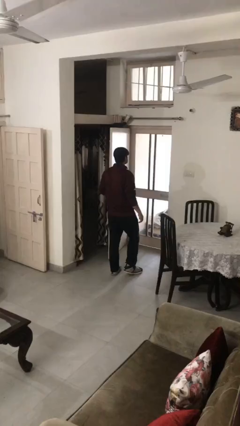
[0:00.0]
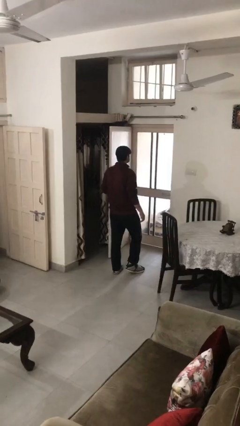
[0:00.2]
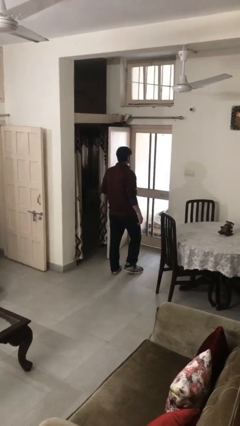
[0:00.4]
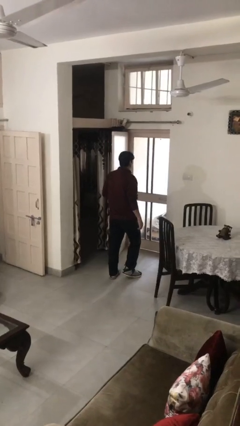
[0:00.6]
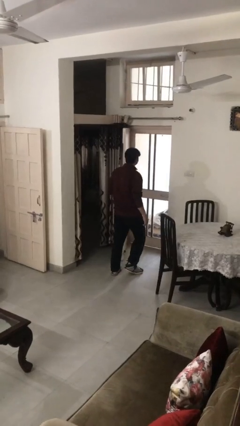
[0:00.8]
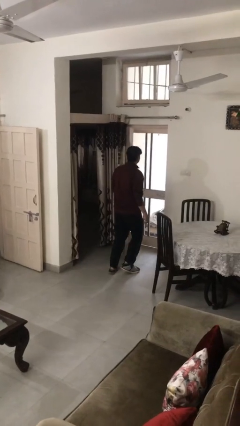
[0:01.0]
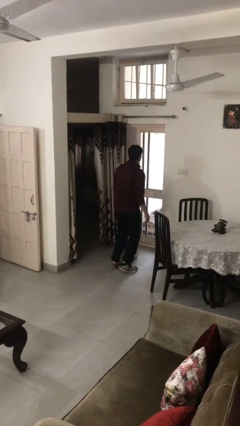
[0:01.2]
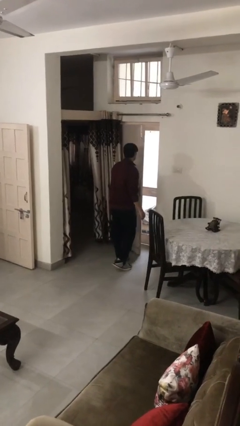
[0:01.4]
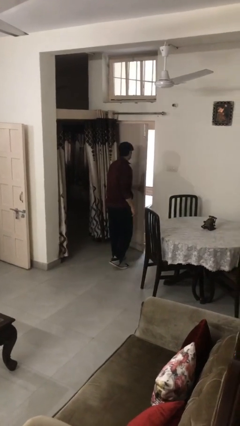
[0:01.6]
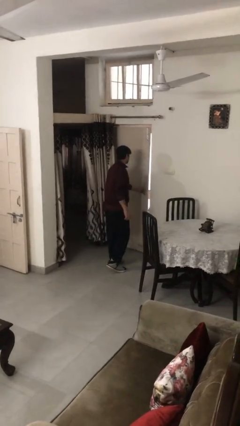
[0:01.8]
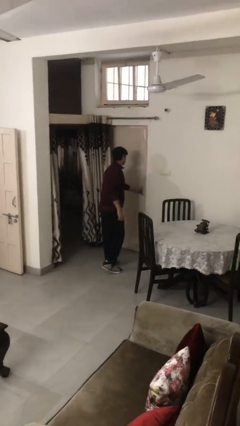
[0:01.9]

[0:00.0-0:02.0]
person closes facility door

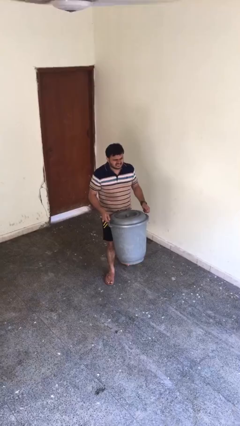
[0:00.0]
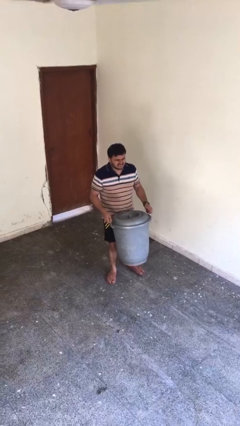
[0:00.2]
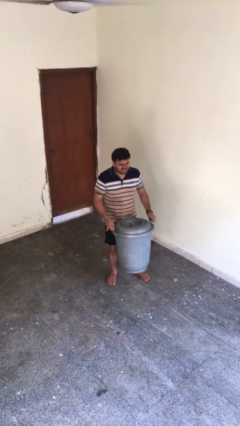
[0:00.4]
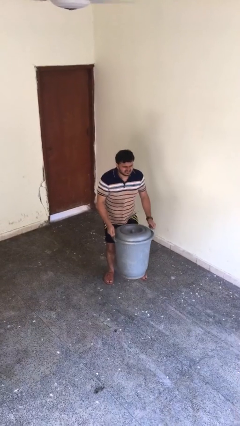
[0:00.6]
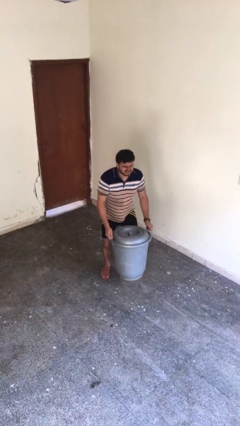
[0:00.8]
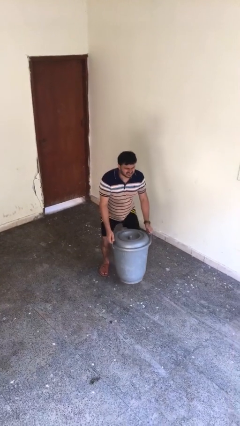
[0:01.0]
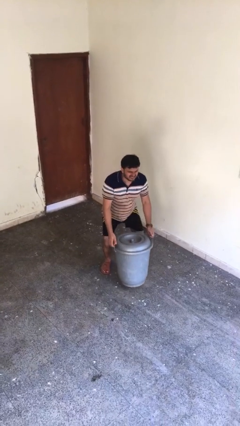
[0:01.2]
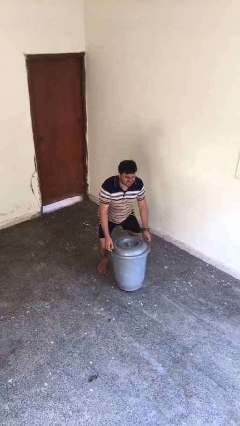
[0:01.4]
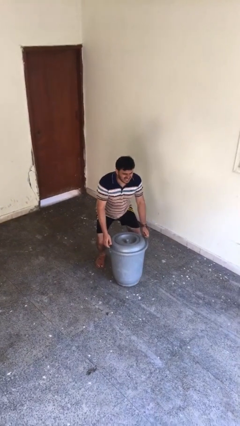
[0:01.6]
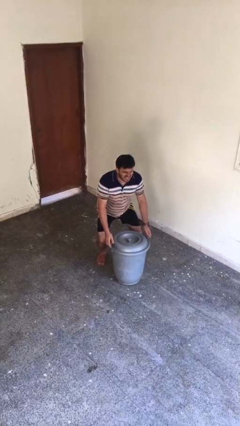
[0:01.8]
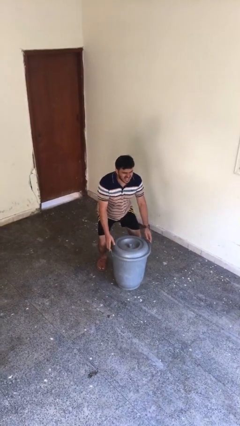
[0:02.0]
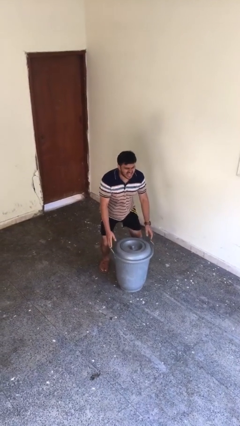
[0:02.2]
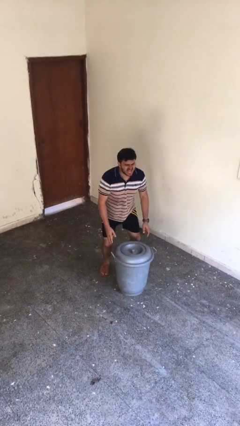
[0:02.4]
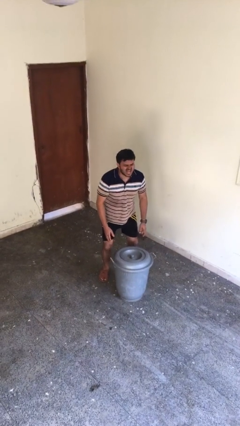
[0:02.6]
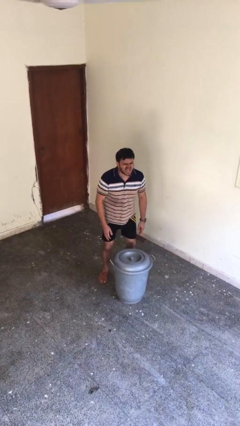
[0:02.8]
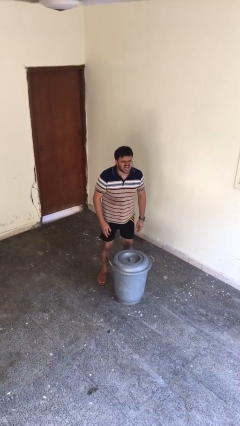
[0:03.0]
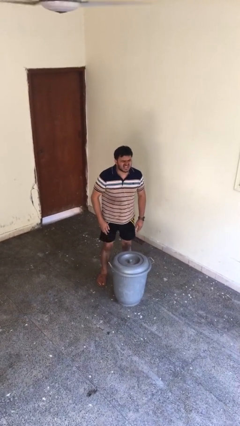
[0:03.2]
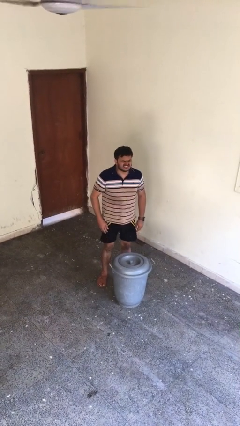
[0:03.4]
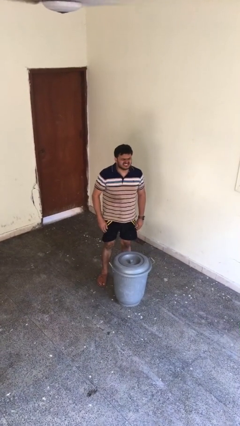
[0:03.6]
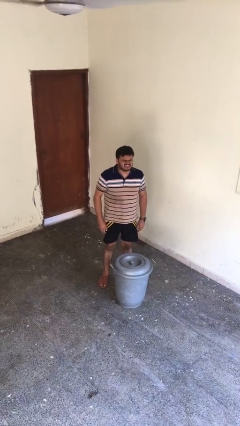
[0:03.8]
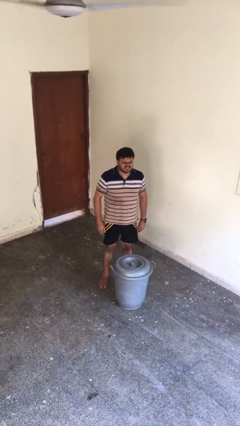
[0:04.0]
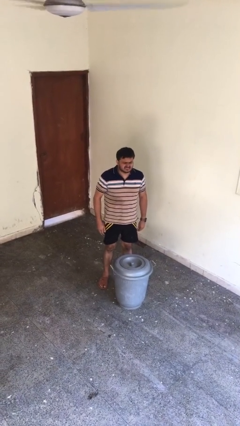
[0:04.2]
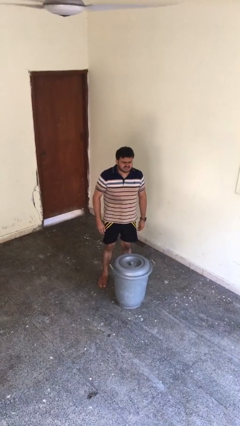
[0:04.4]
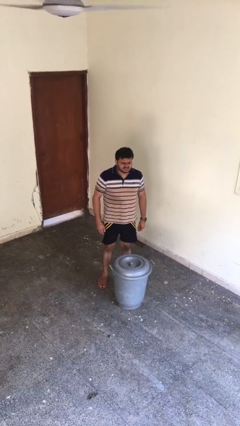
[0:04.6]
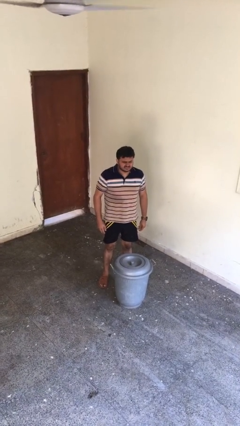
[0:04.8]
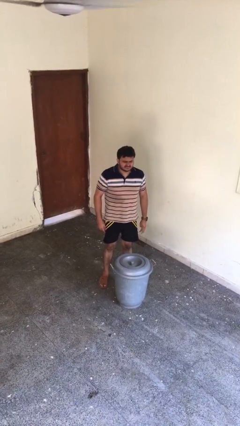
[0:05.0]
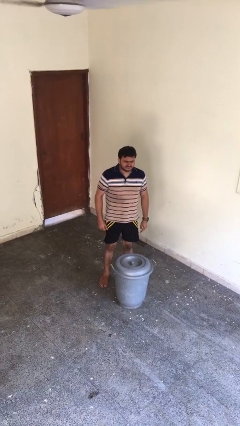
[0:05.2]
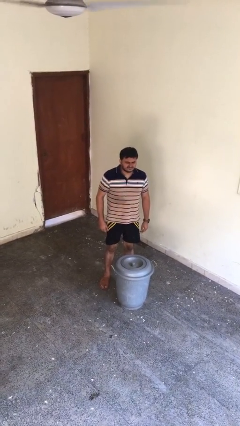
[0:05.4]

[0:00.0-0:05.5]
person puts down object on floor

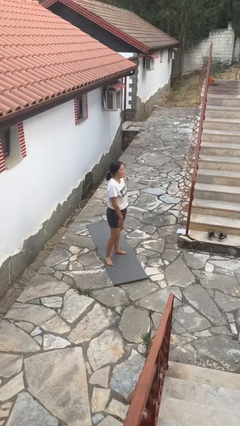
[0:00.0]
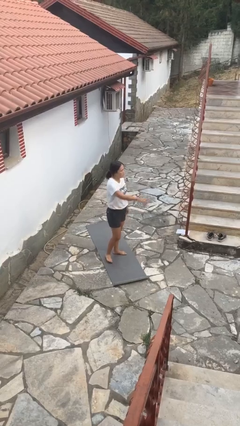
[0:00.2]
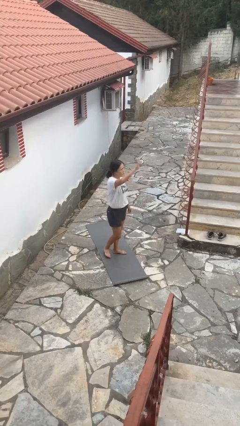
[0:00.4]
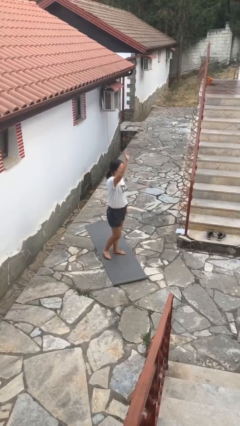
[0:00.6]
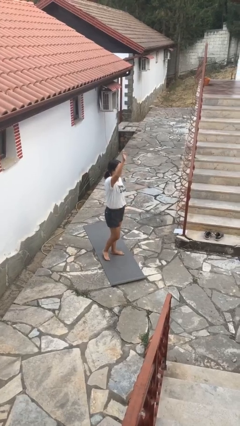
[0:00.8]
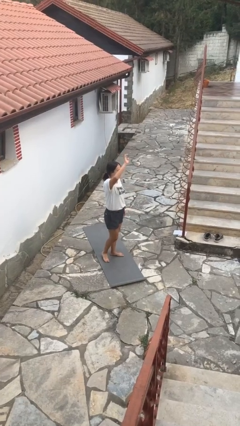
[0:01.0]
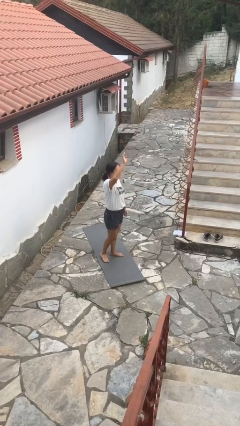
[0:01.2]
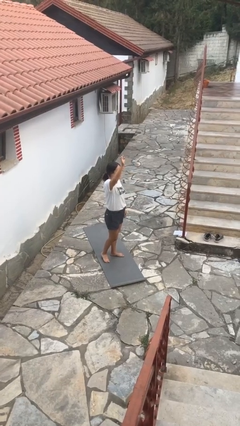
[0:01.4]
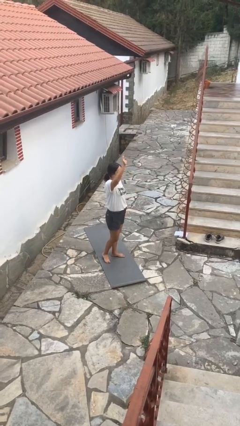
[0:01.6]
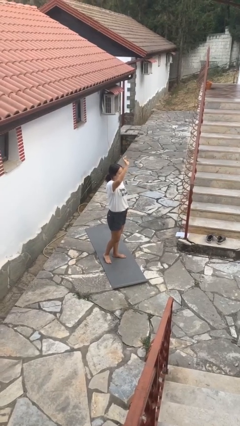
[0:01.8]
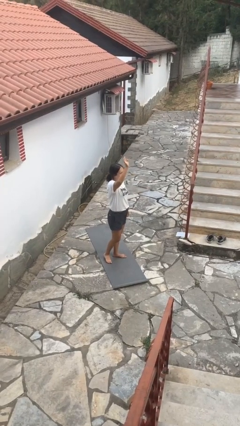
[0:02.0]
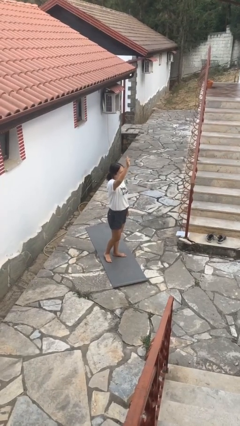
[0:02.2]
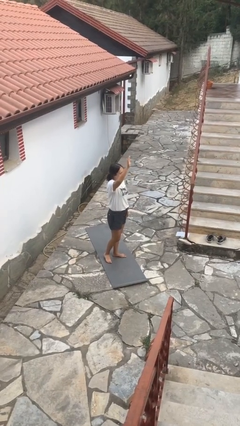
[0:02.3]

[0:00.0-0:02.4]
person gestures raise hand

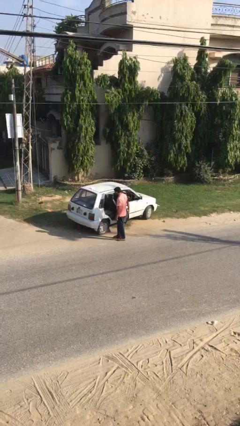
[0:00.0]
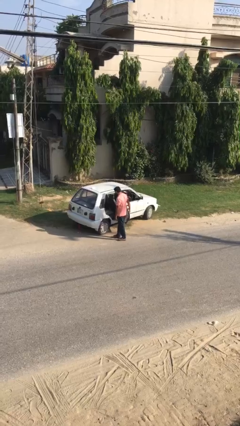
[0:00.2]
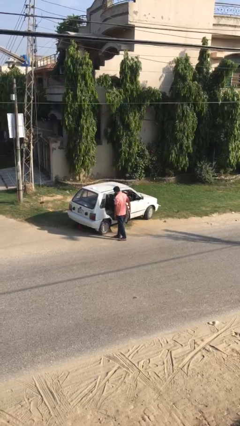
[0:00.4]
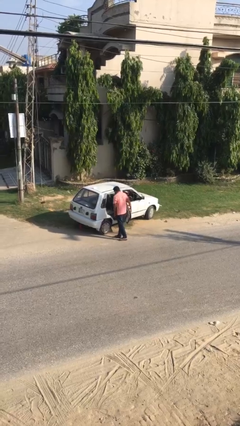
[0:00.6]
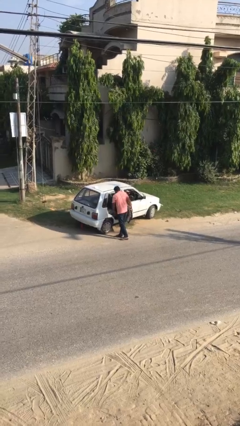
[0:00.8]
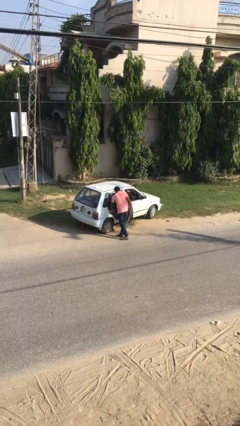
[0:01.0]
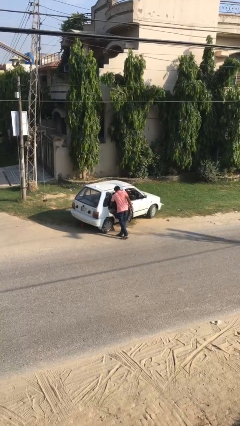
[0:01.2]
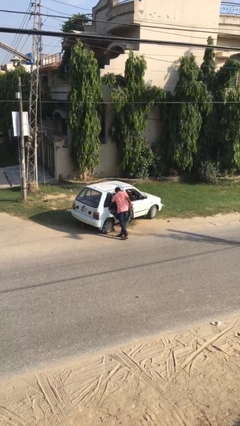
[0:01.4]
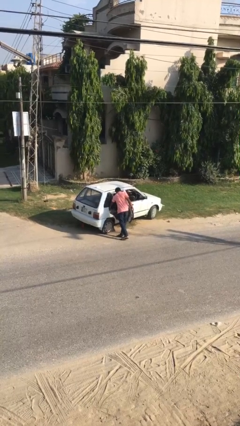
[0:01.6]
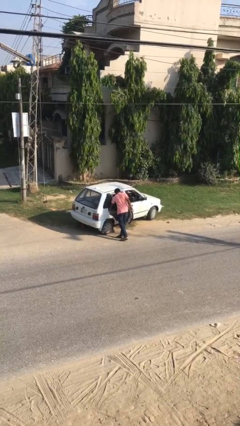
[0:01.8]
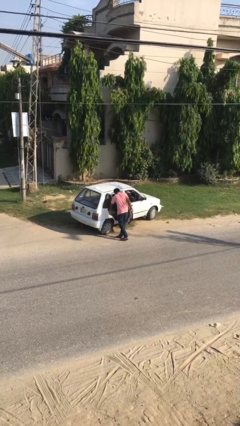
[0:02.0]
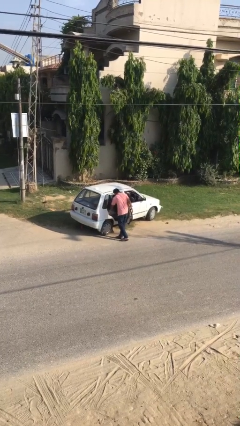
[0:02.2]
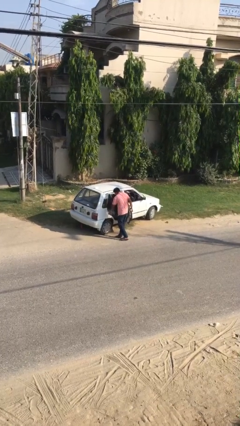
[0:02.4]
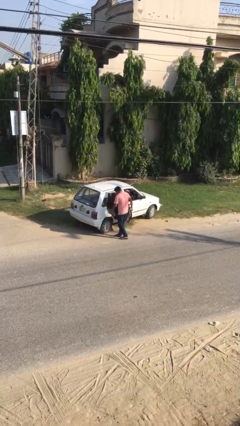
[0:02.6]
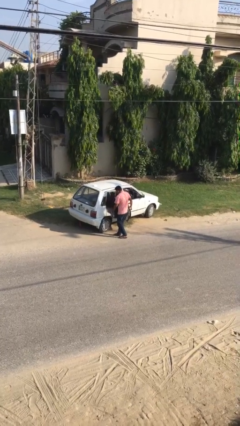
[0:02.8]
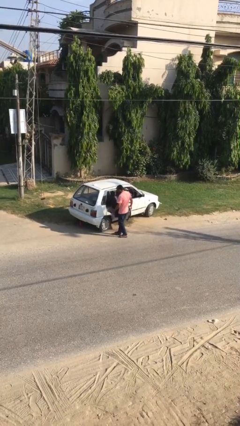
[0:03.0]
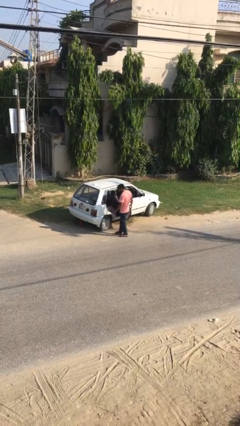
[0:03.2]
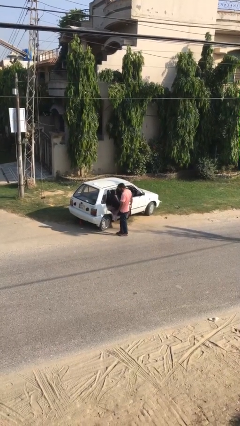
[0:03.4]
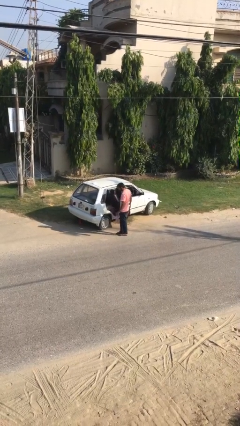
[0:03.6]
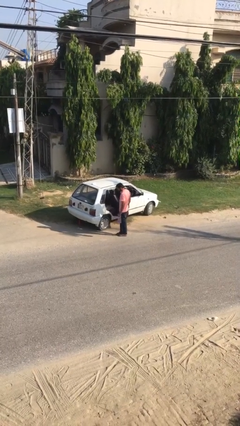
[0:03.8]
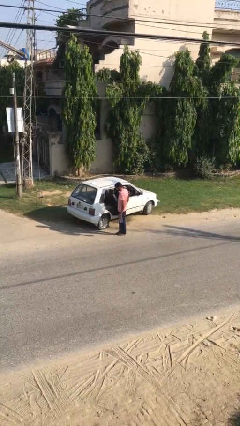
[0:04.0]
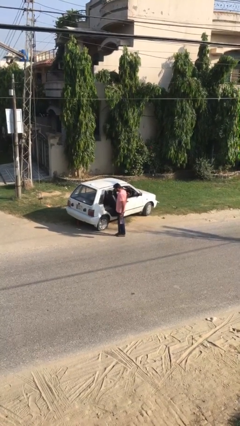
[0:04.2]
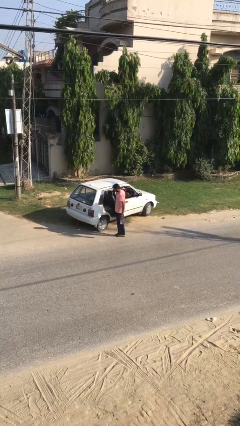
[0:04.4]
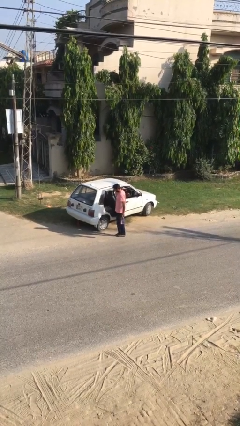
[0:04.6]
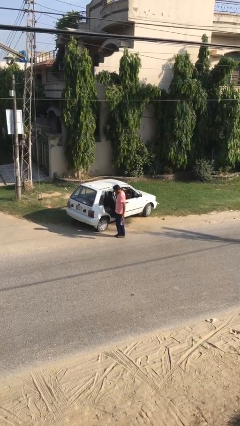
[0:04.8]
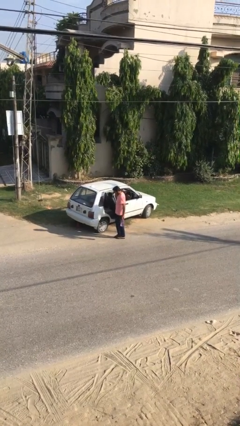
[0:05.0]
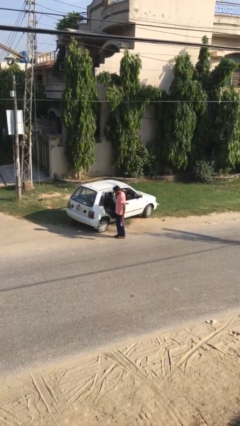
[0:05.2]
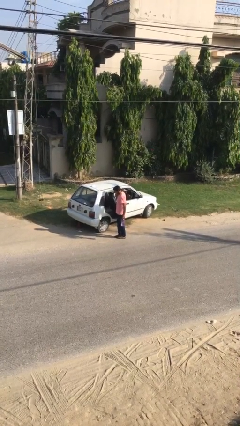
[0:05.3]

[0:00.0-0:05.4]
person unloads car

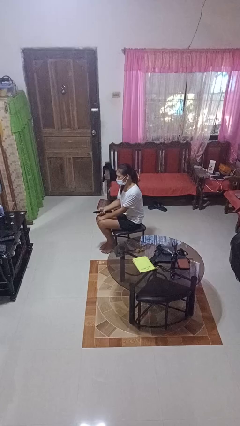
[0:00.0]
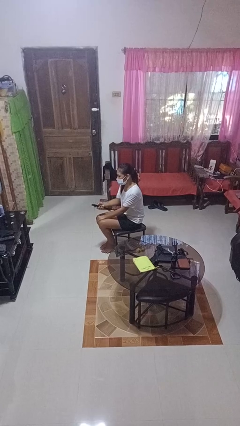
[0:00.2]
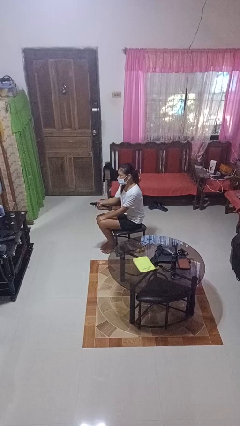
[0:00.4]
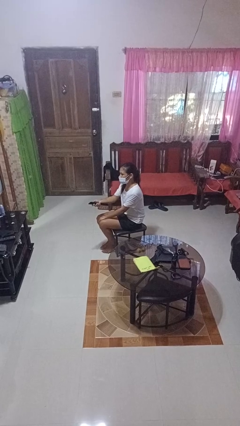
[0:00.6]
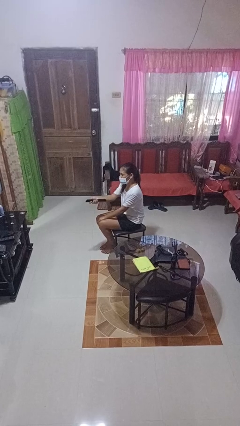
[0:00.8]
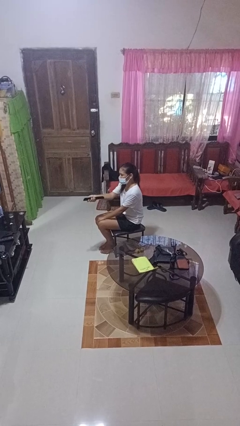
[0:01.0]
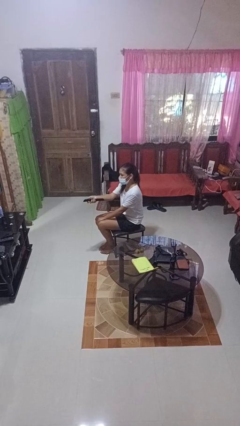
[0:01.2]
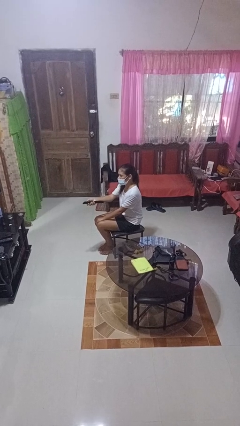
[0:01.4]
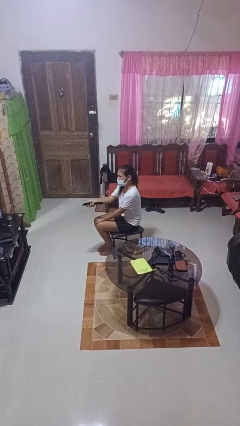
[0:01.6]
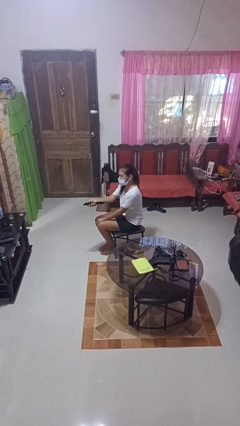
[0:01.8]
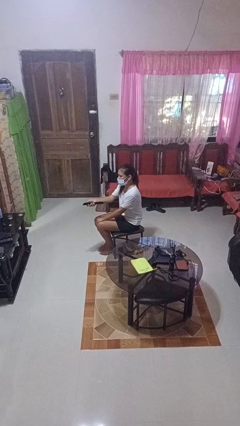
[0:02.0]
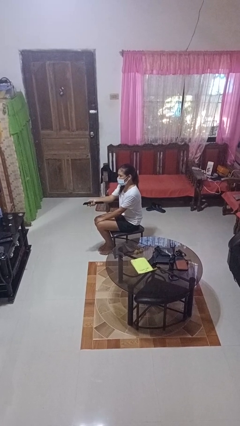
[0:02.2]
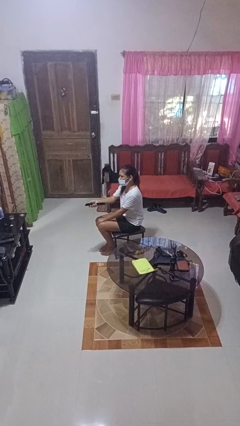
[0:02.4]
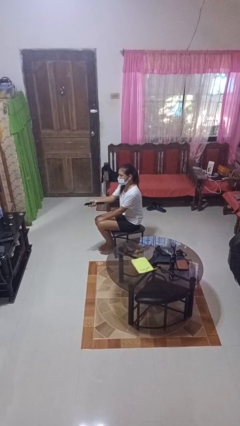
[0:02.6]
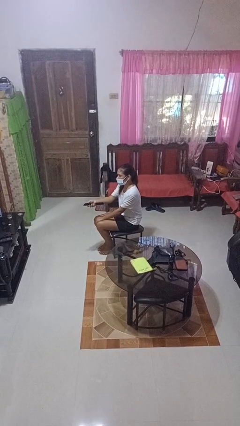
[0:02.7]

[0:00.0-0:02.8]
person uses television remote
